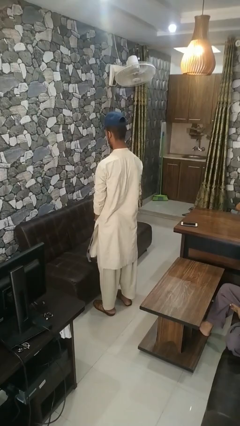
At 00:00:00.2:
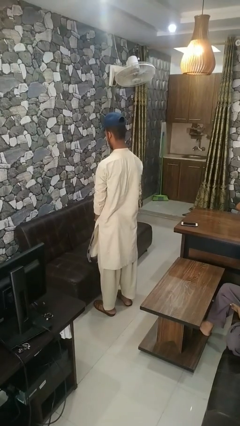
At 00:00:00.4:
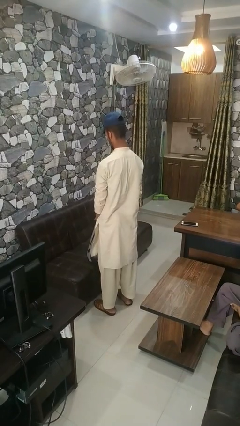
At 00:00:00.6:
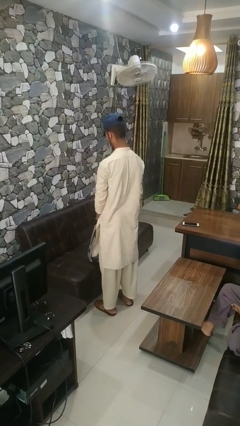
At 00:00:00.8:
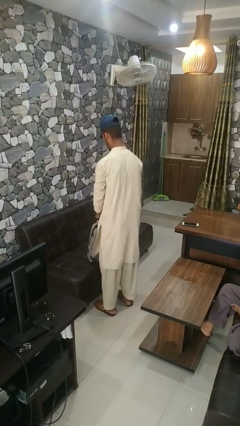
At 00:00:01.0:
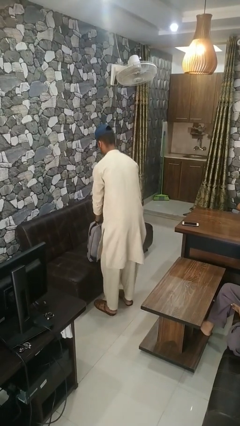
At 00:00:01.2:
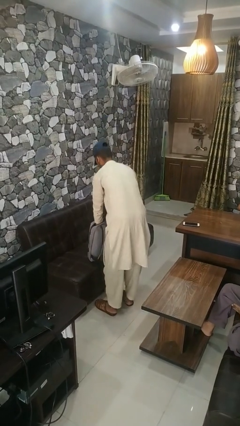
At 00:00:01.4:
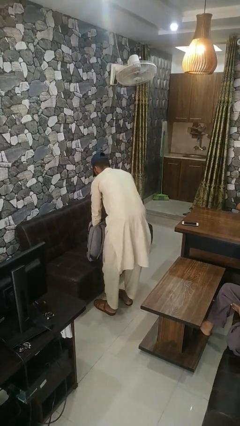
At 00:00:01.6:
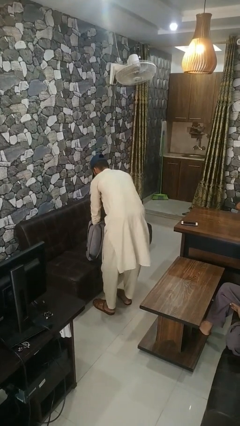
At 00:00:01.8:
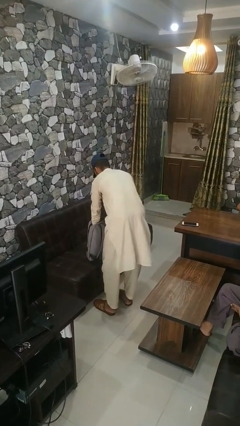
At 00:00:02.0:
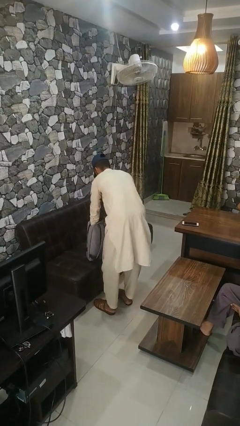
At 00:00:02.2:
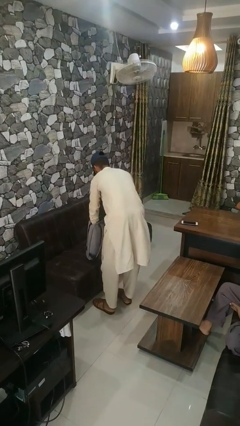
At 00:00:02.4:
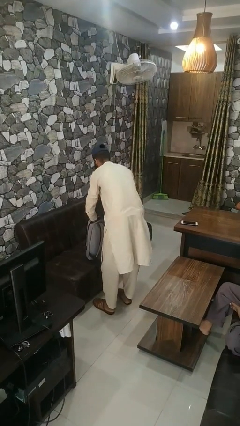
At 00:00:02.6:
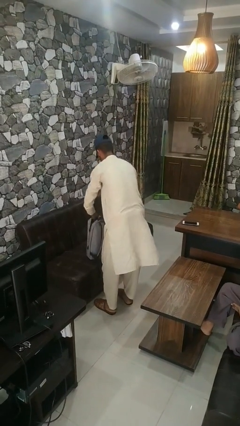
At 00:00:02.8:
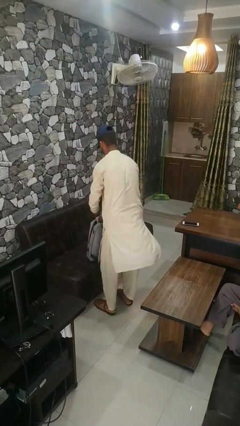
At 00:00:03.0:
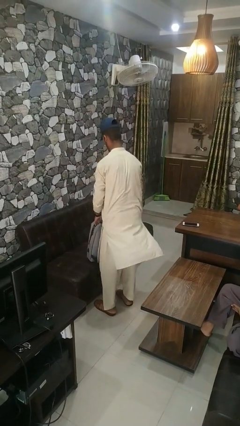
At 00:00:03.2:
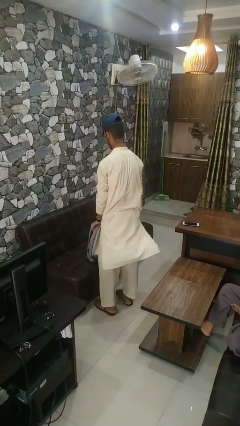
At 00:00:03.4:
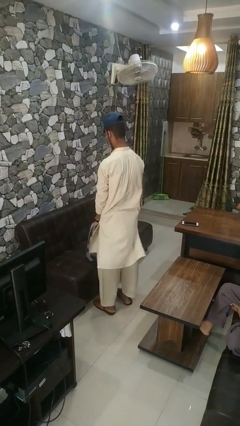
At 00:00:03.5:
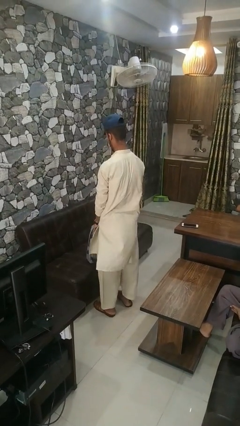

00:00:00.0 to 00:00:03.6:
person searches in bag

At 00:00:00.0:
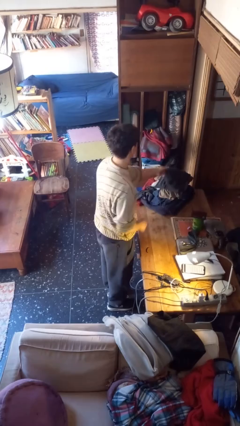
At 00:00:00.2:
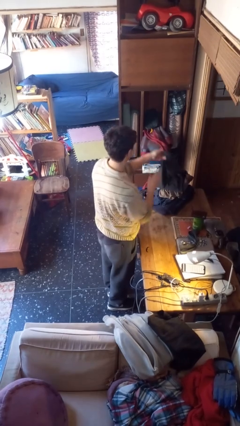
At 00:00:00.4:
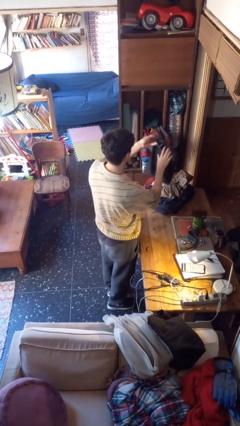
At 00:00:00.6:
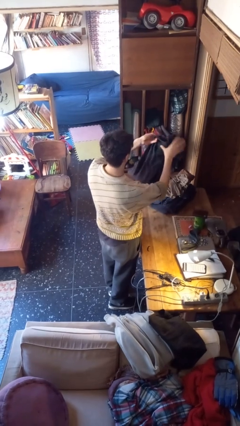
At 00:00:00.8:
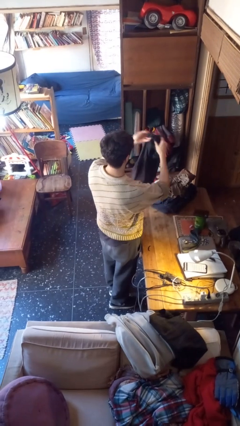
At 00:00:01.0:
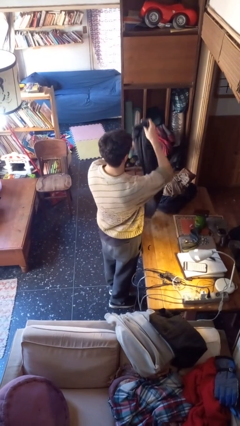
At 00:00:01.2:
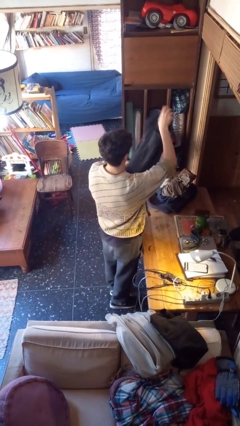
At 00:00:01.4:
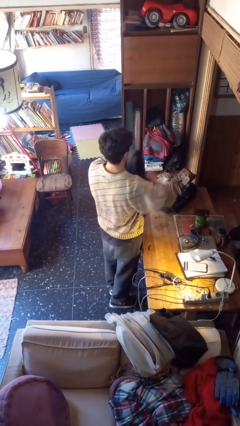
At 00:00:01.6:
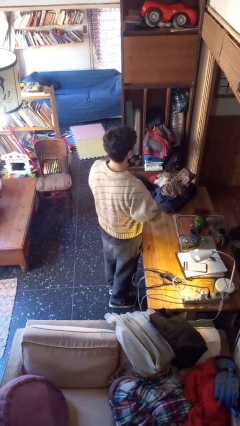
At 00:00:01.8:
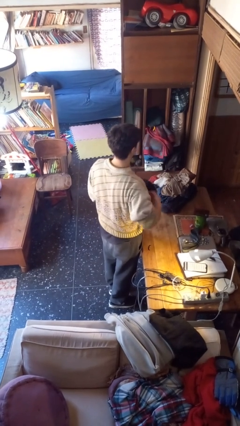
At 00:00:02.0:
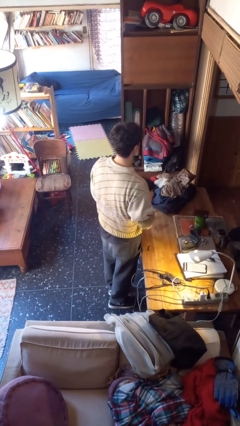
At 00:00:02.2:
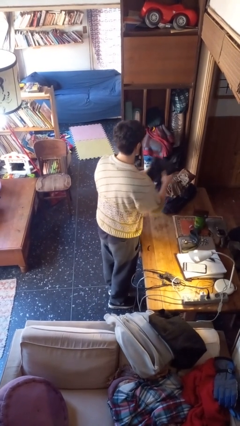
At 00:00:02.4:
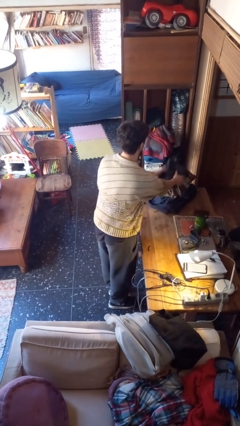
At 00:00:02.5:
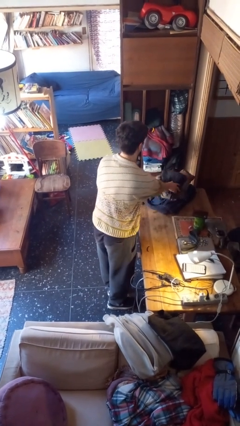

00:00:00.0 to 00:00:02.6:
person folds pants

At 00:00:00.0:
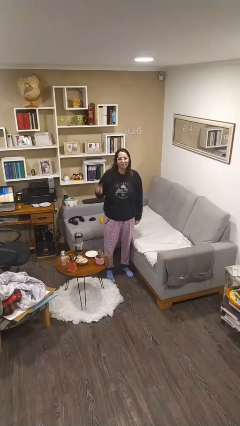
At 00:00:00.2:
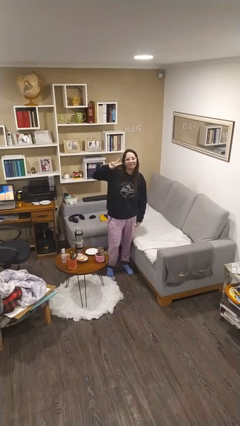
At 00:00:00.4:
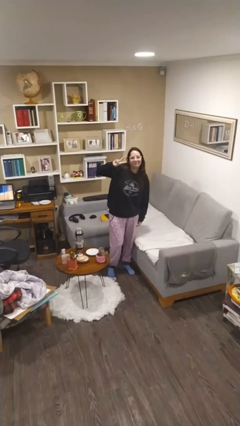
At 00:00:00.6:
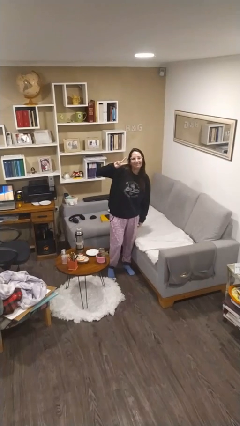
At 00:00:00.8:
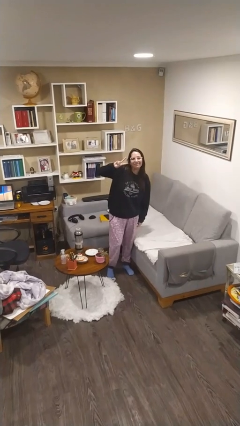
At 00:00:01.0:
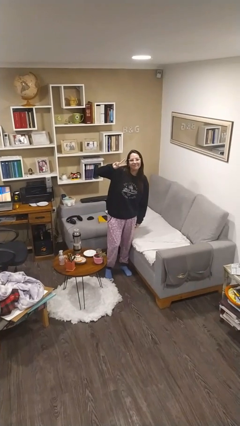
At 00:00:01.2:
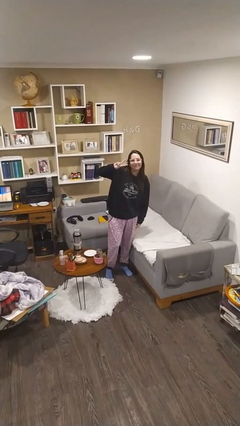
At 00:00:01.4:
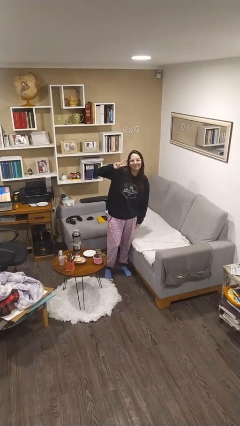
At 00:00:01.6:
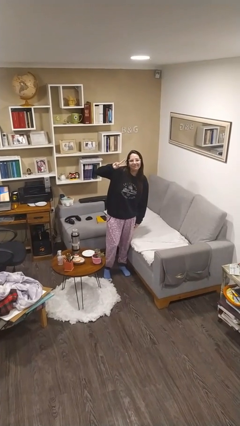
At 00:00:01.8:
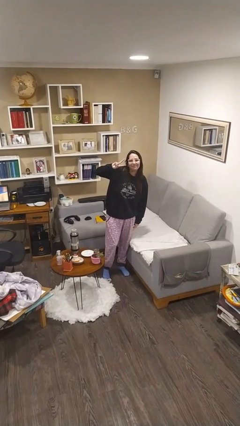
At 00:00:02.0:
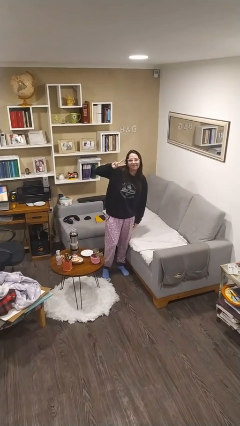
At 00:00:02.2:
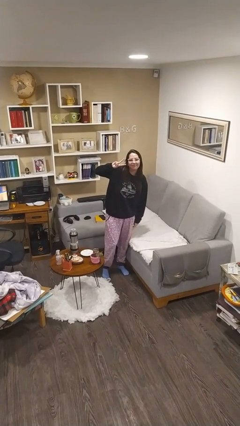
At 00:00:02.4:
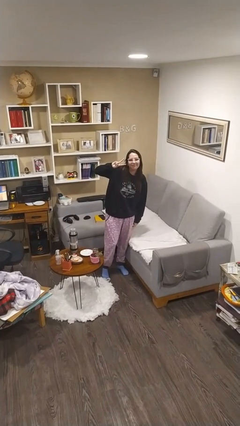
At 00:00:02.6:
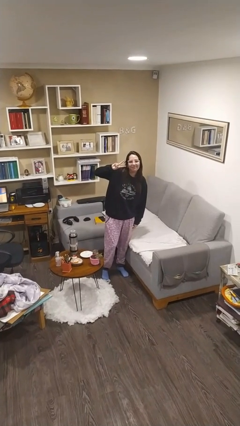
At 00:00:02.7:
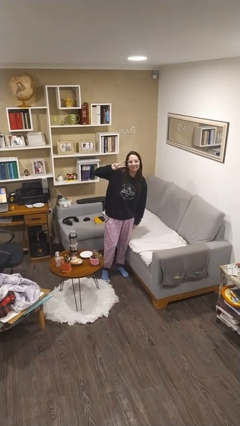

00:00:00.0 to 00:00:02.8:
person gestures peace

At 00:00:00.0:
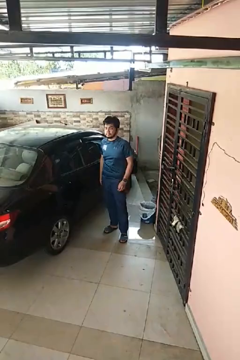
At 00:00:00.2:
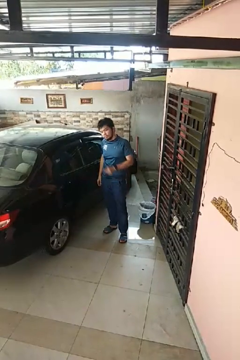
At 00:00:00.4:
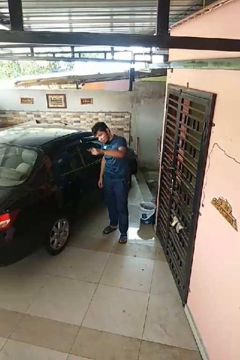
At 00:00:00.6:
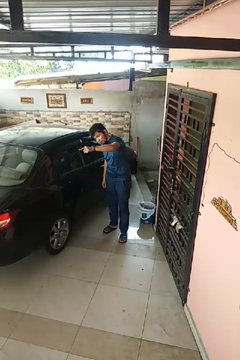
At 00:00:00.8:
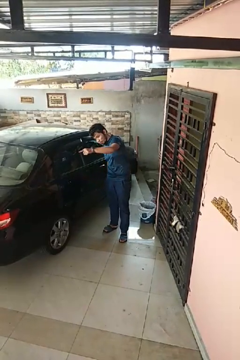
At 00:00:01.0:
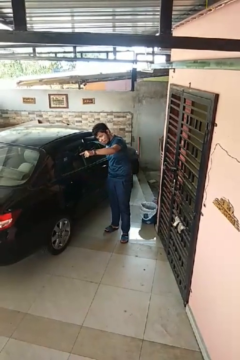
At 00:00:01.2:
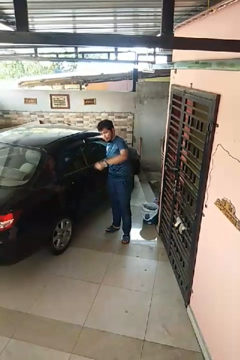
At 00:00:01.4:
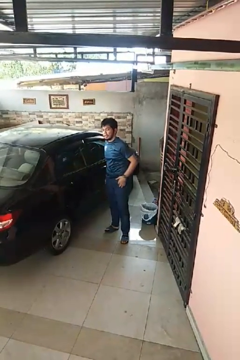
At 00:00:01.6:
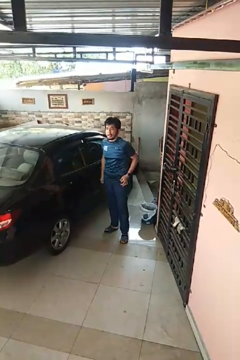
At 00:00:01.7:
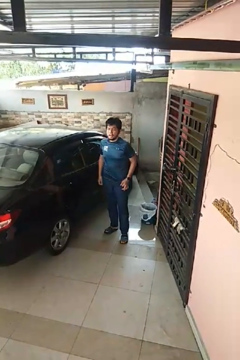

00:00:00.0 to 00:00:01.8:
person points at person

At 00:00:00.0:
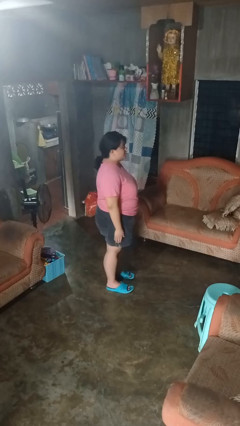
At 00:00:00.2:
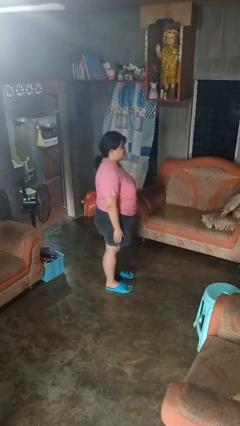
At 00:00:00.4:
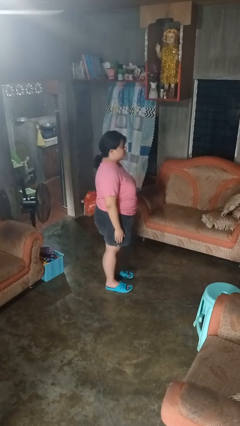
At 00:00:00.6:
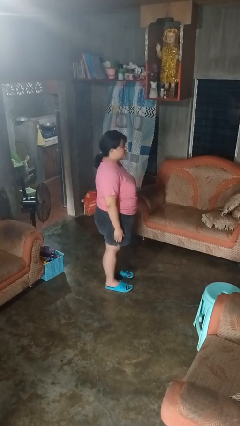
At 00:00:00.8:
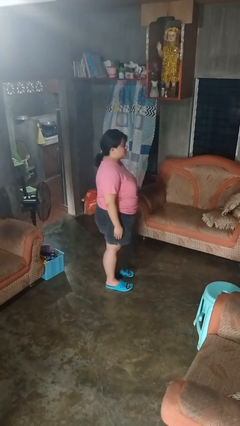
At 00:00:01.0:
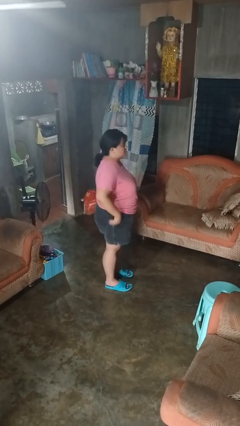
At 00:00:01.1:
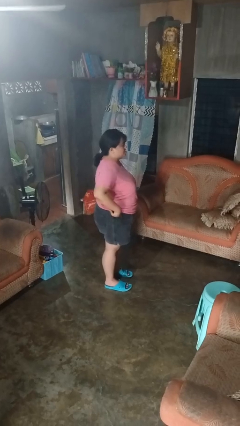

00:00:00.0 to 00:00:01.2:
person puts hands in back pockets

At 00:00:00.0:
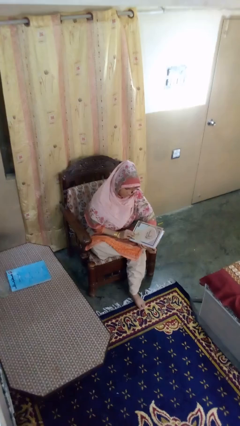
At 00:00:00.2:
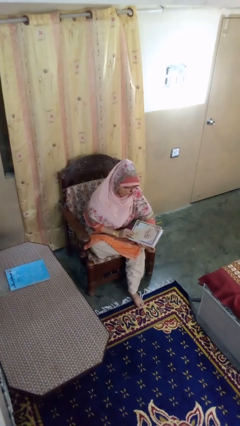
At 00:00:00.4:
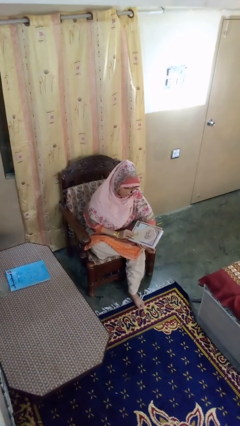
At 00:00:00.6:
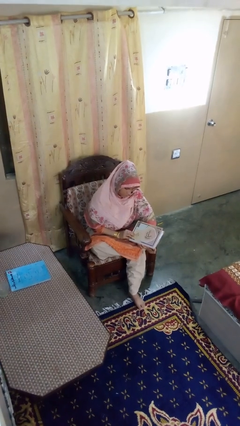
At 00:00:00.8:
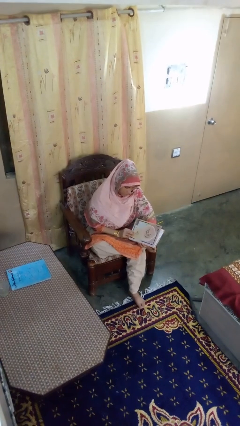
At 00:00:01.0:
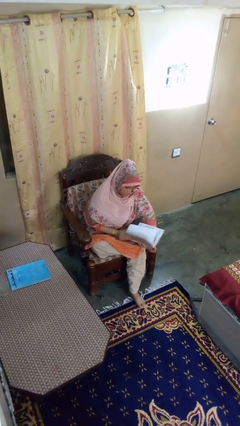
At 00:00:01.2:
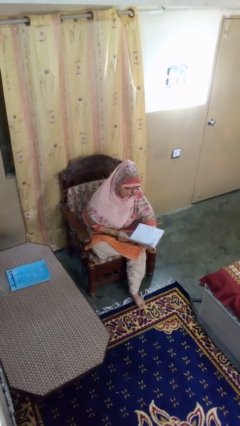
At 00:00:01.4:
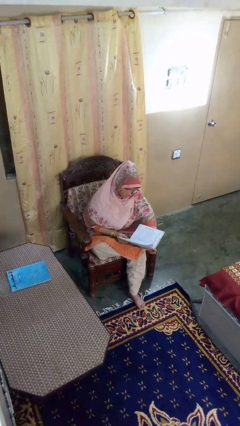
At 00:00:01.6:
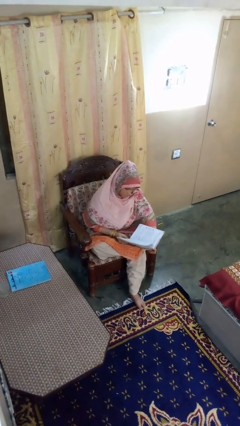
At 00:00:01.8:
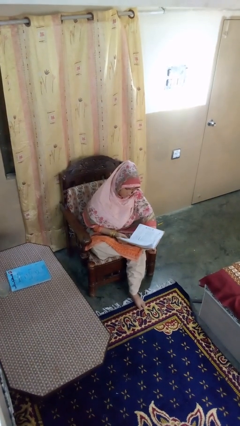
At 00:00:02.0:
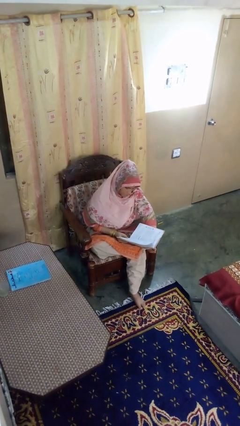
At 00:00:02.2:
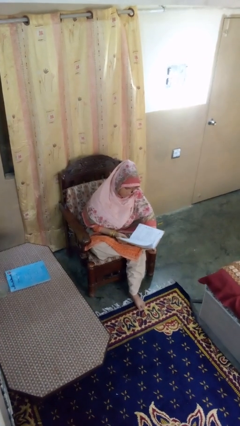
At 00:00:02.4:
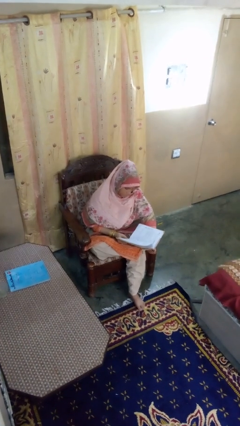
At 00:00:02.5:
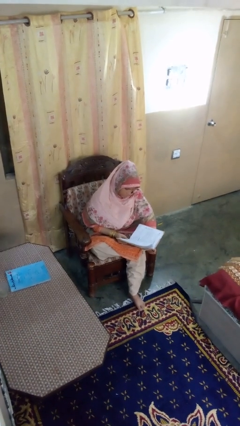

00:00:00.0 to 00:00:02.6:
person reads book

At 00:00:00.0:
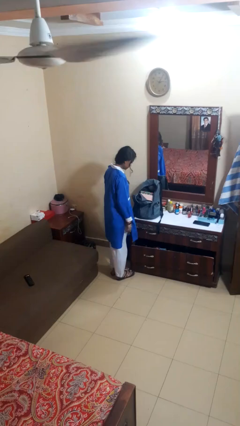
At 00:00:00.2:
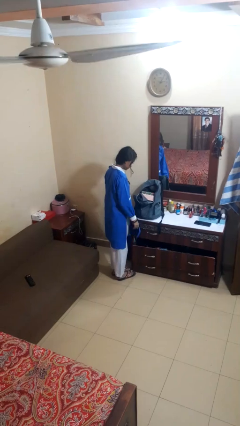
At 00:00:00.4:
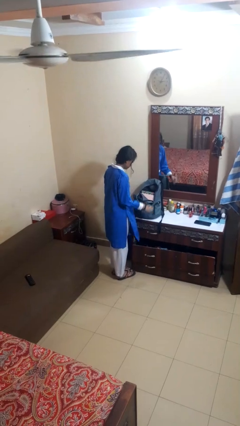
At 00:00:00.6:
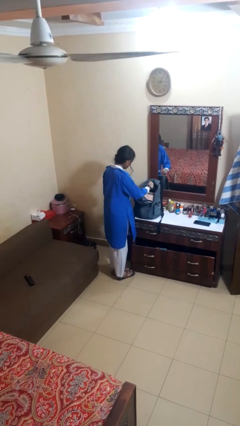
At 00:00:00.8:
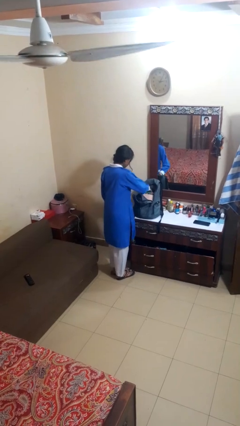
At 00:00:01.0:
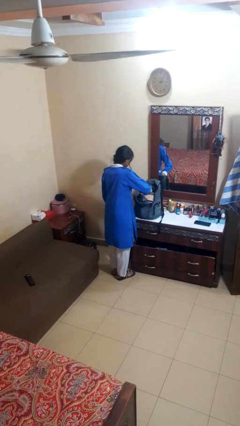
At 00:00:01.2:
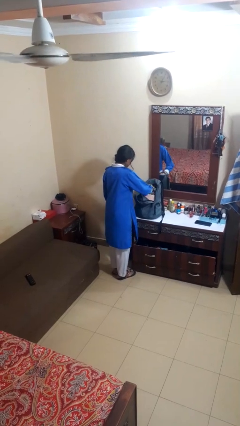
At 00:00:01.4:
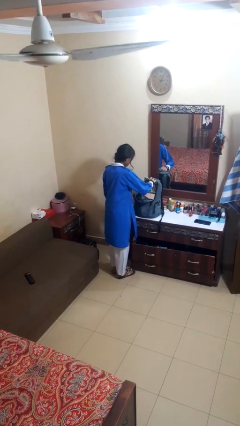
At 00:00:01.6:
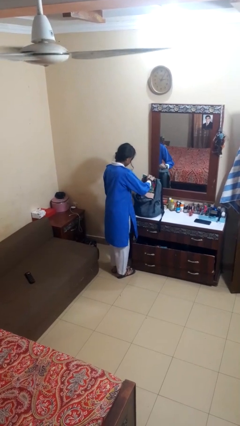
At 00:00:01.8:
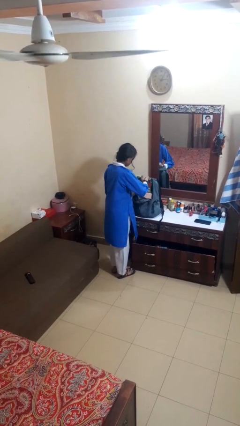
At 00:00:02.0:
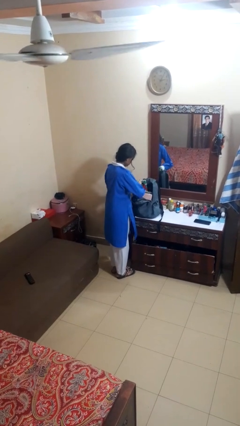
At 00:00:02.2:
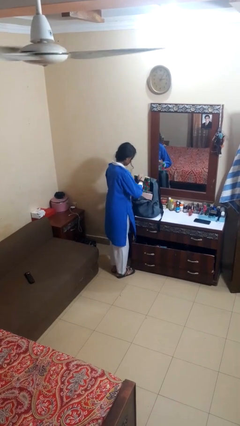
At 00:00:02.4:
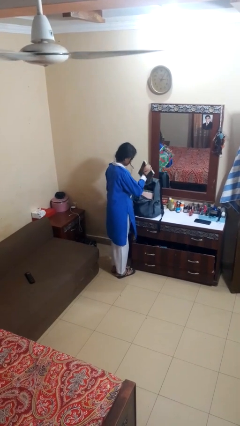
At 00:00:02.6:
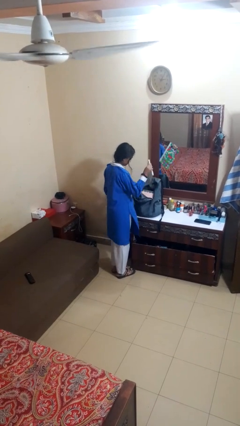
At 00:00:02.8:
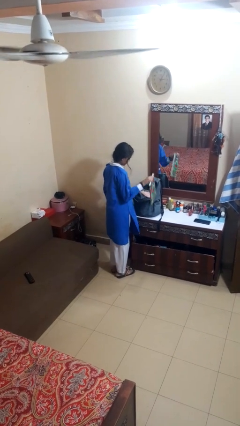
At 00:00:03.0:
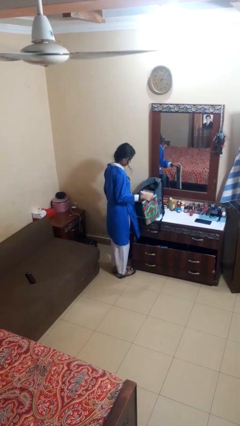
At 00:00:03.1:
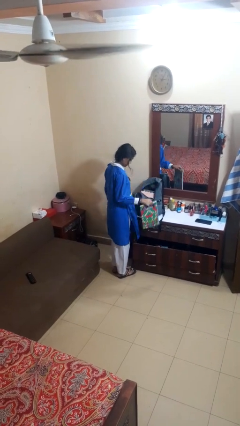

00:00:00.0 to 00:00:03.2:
person takes object from bag
